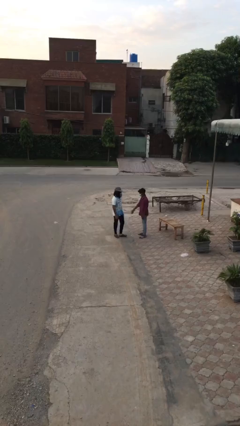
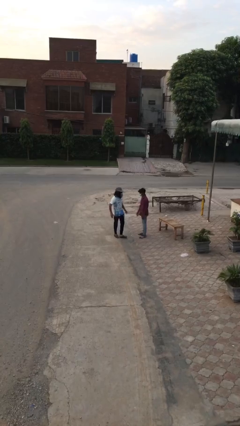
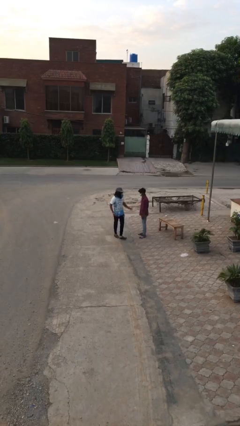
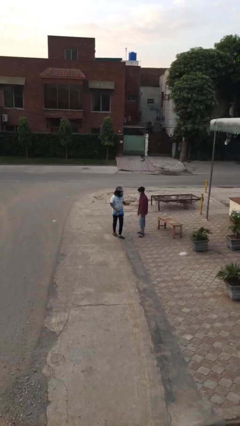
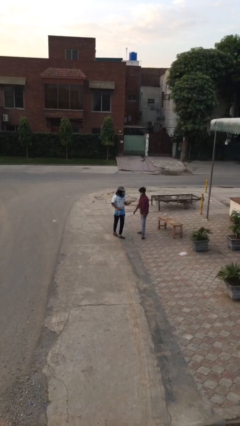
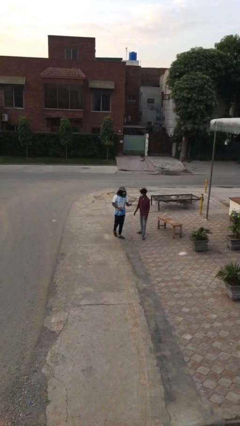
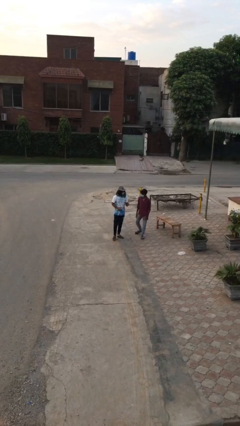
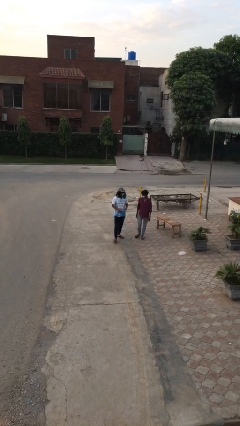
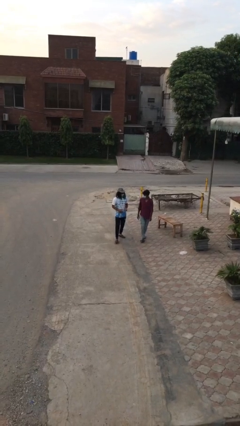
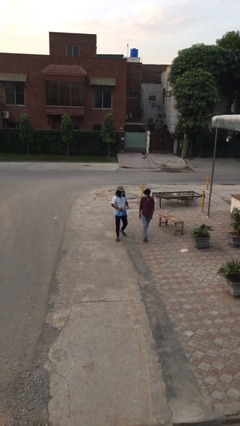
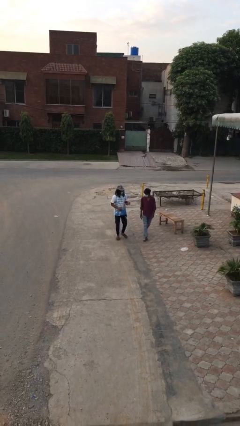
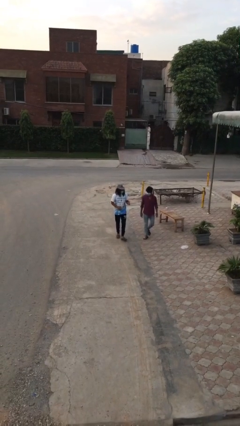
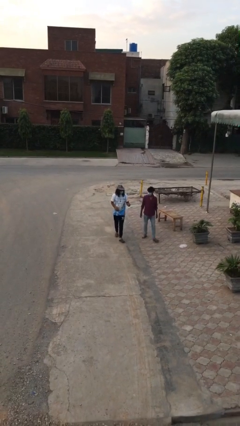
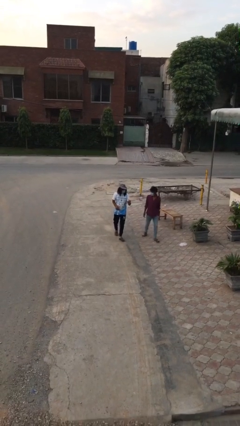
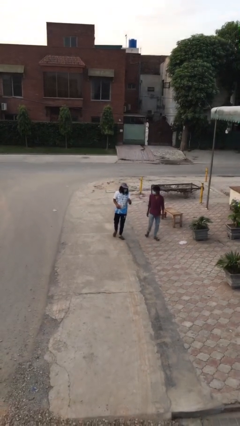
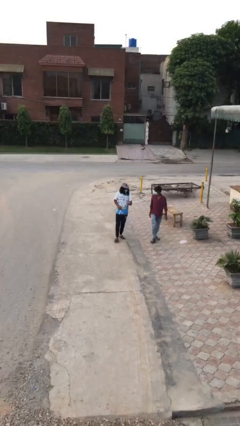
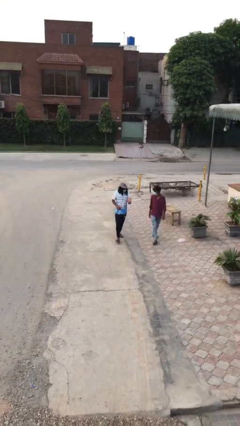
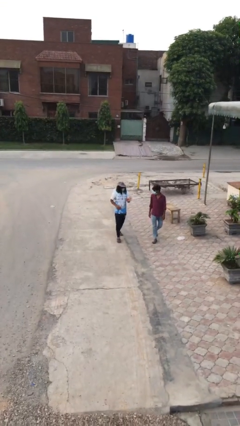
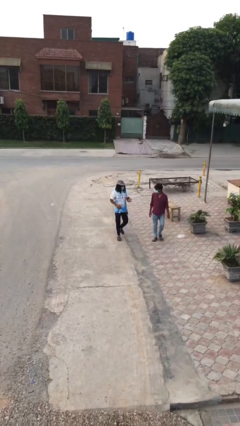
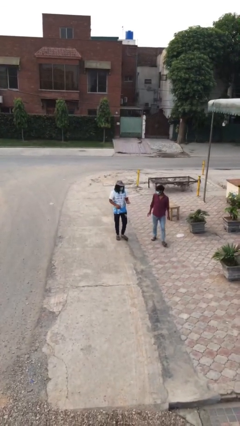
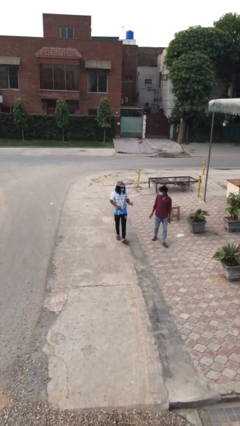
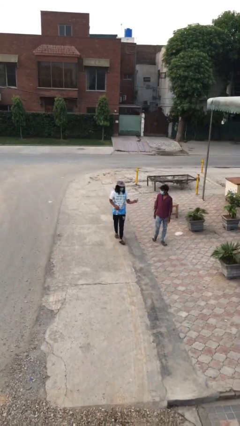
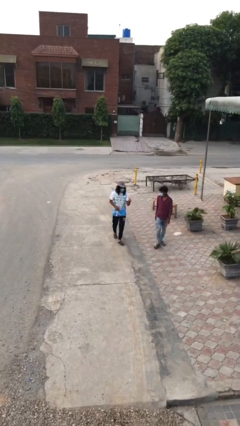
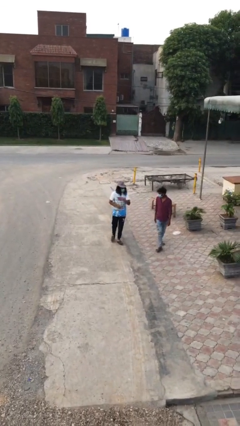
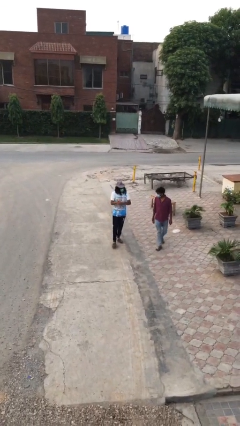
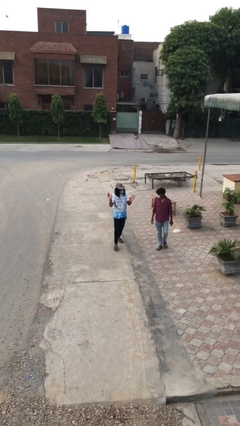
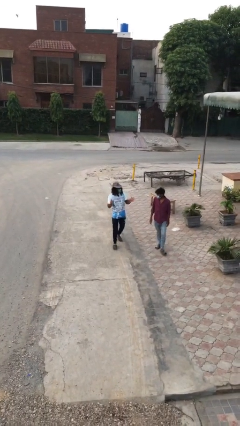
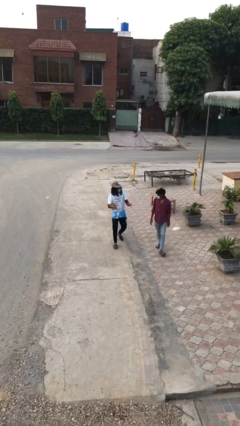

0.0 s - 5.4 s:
person talks to person

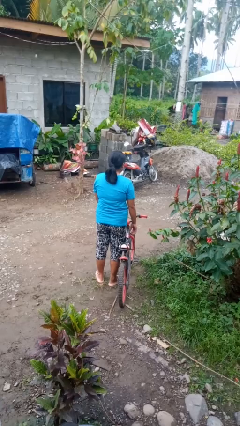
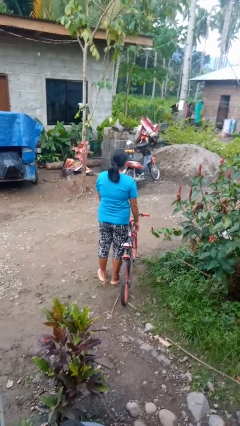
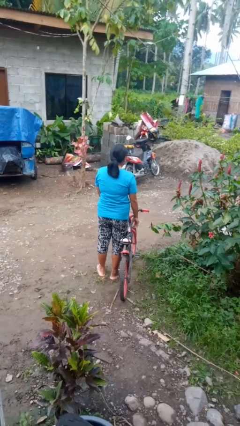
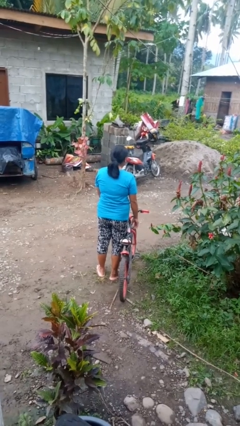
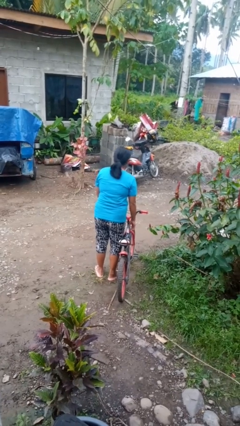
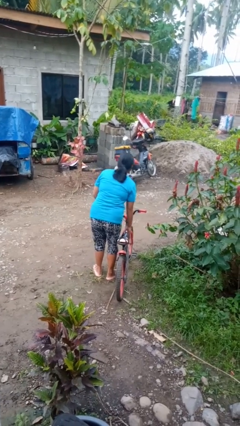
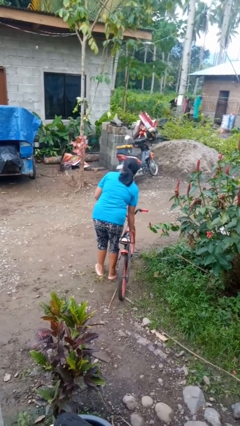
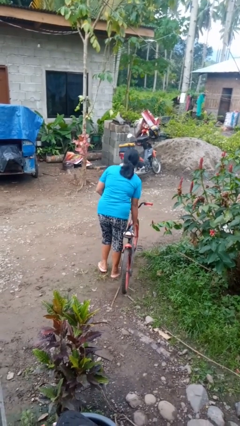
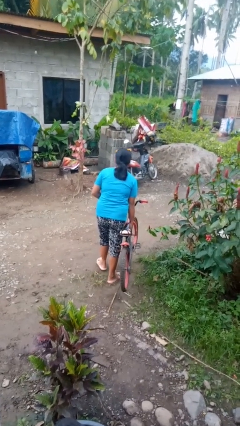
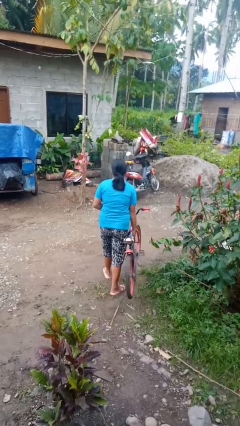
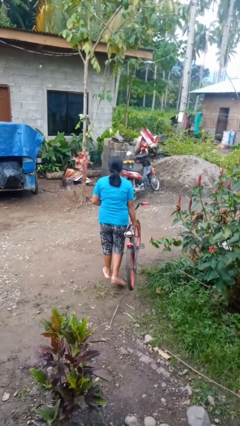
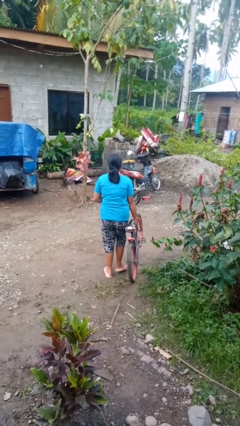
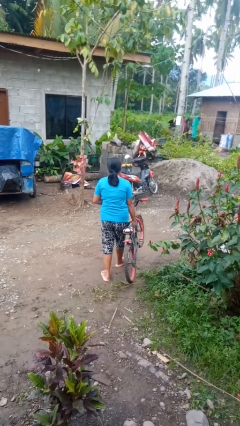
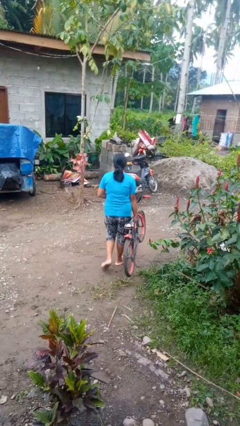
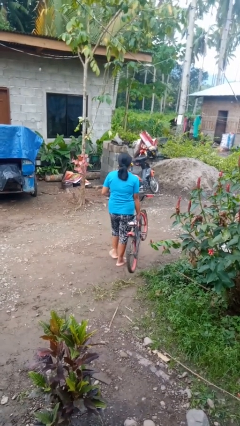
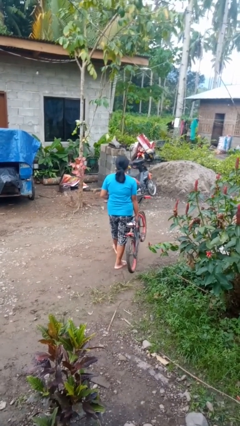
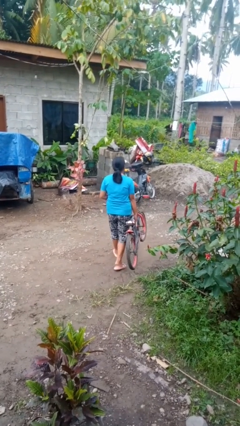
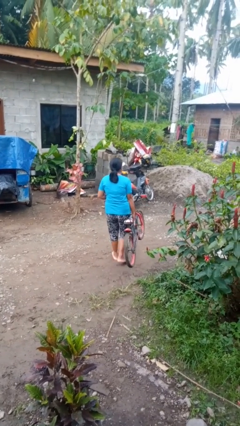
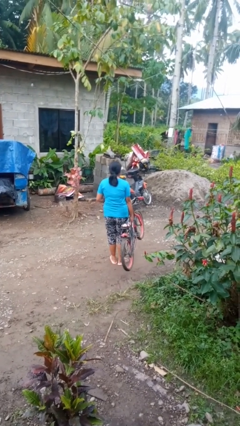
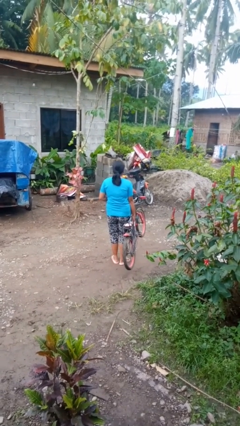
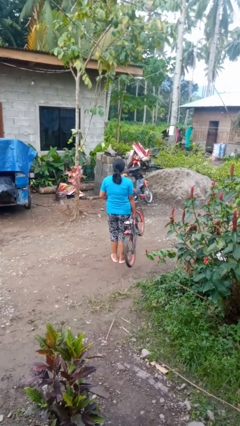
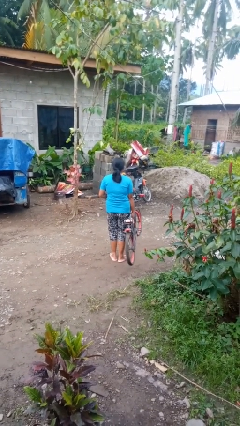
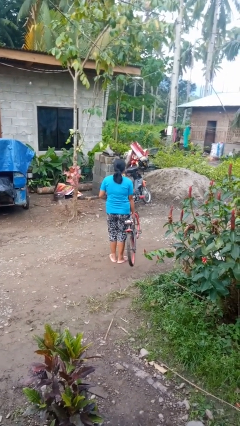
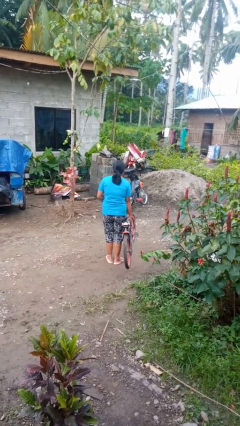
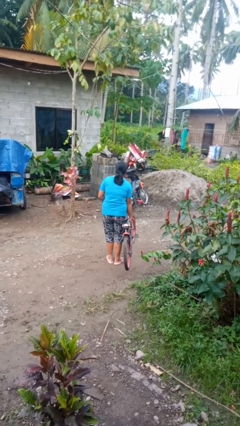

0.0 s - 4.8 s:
person carries bicycle

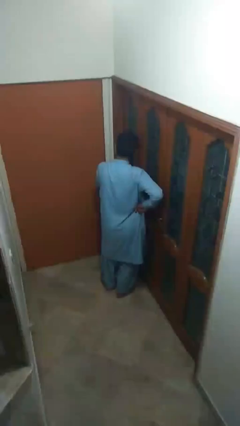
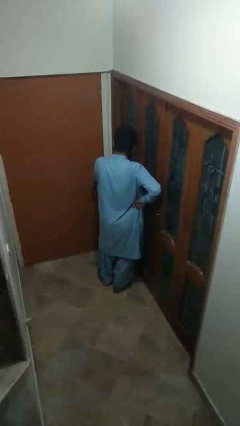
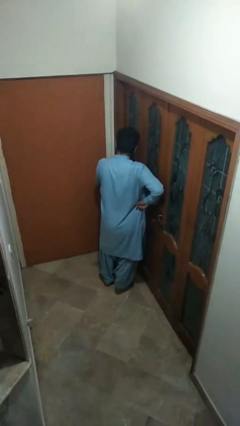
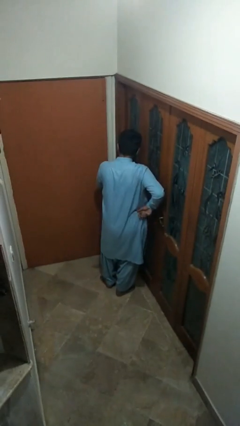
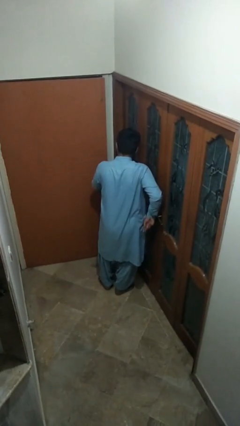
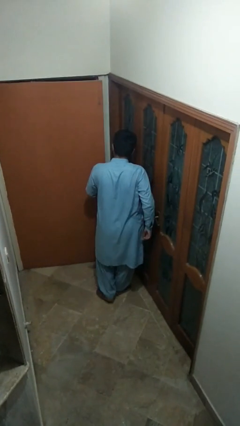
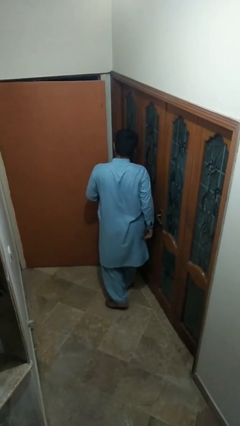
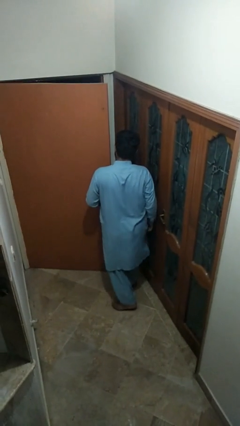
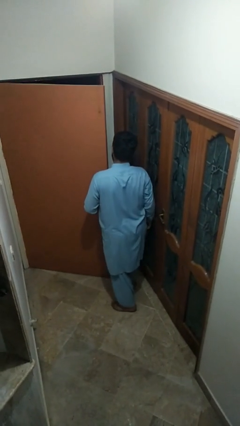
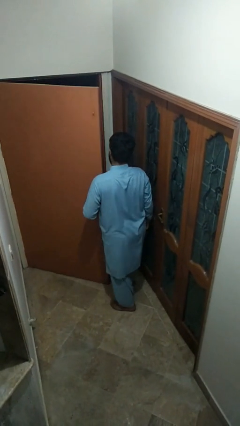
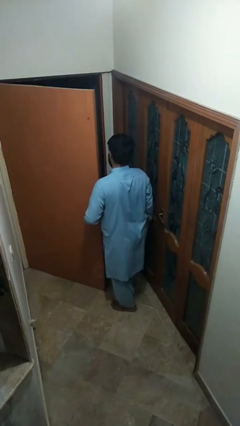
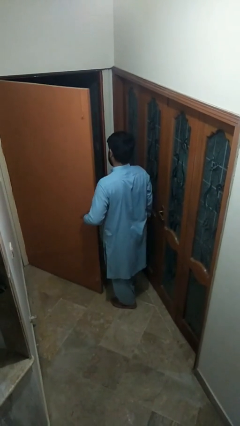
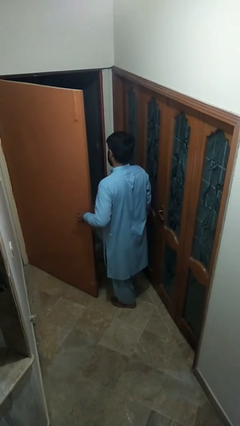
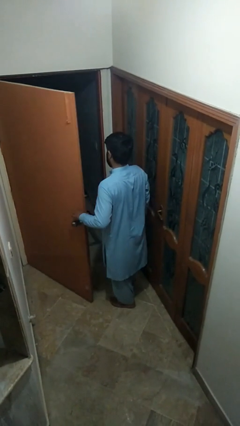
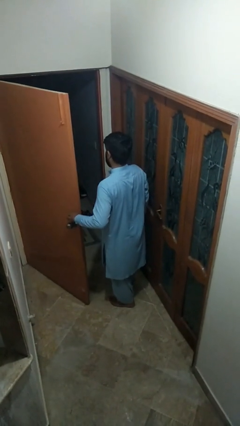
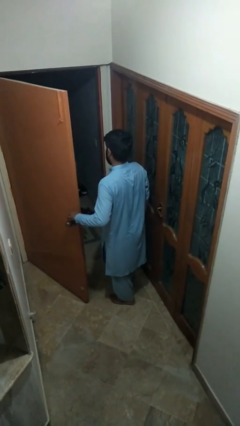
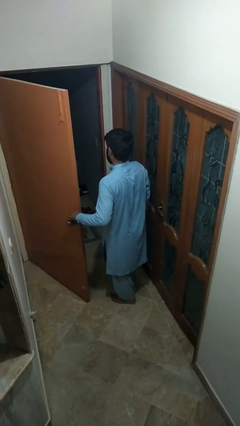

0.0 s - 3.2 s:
person opens facility door

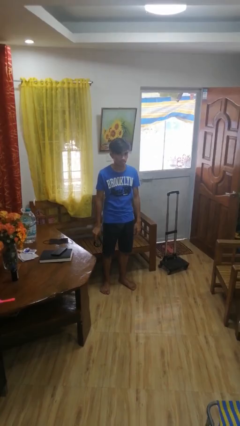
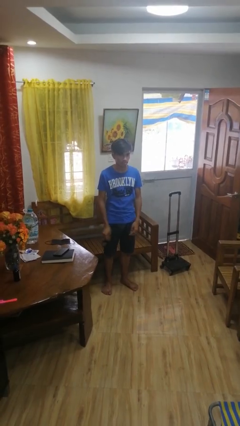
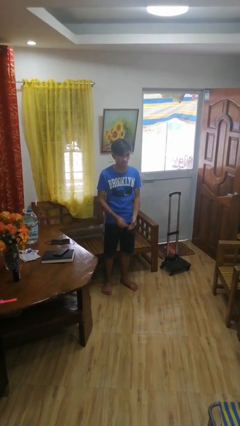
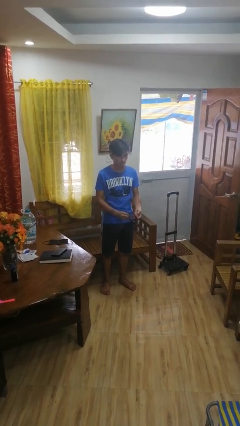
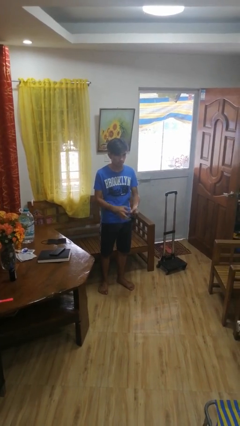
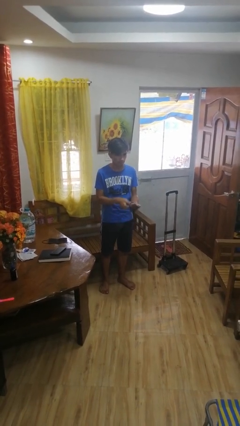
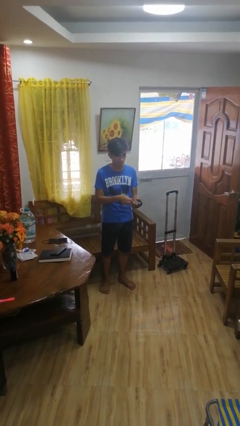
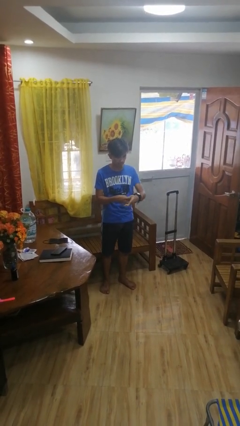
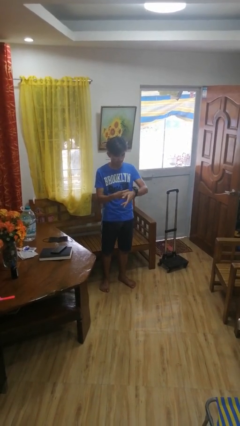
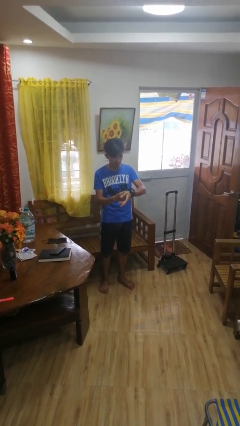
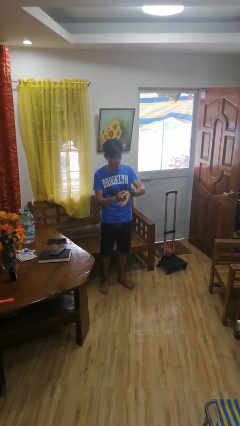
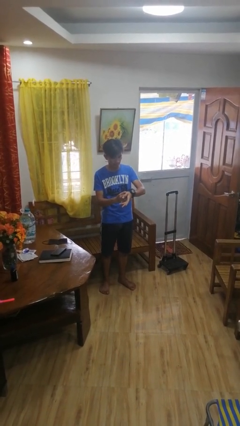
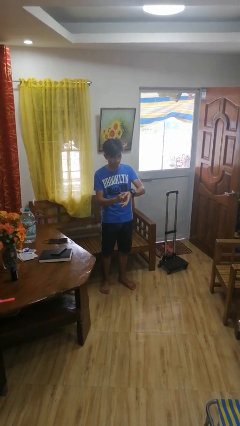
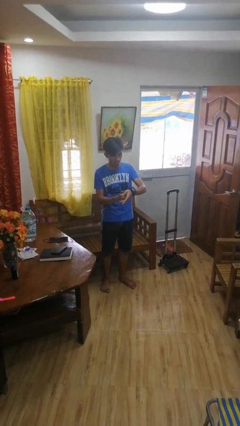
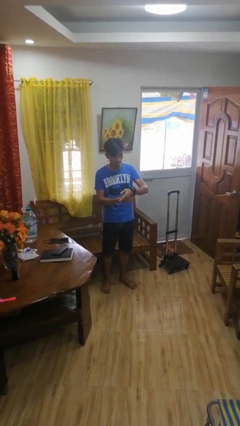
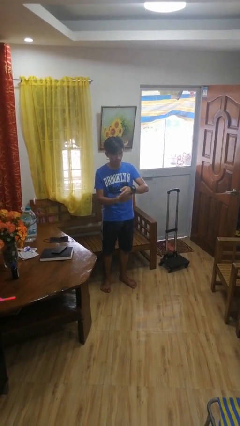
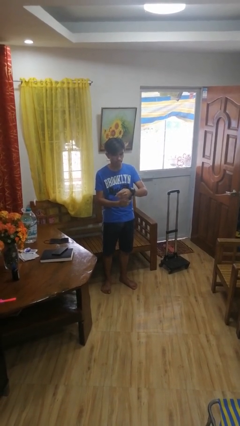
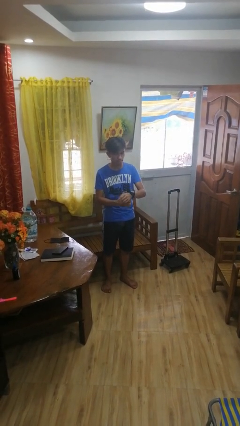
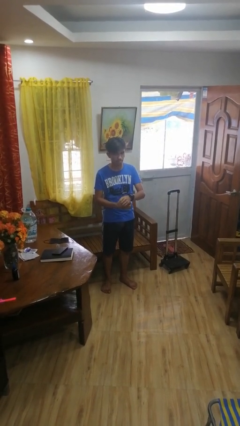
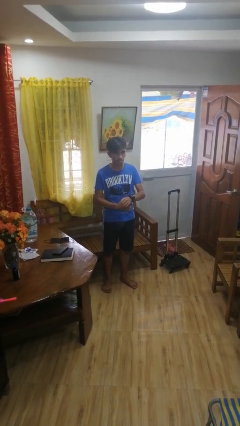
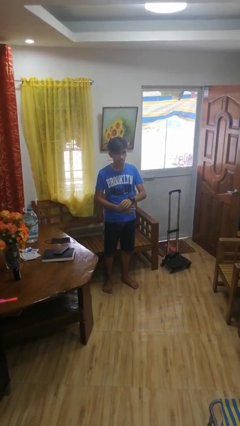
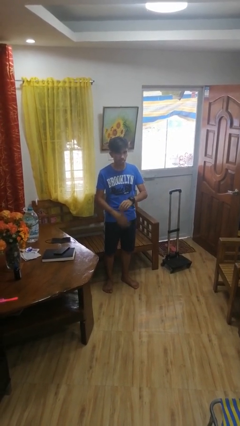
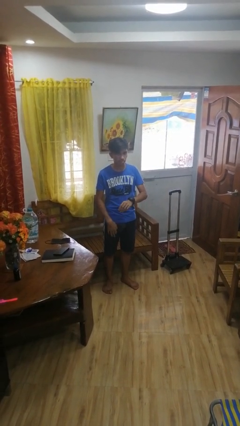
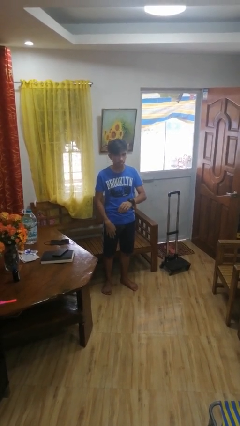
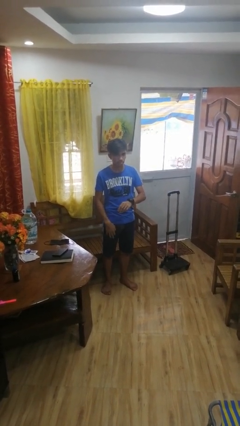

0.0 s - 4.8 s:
person puts on wristwatch
